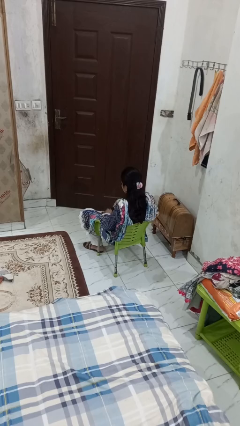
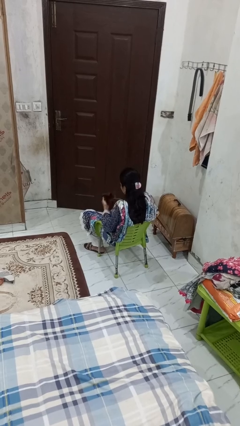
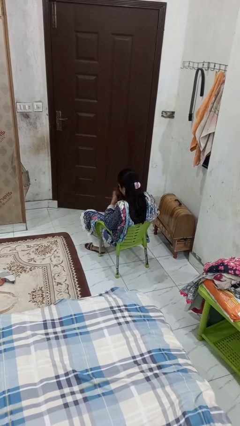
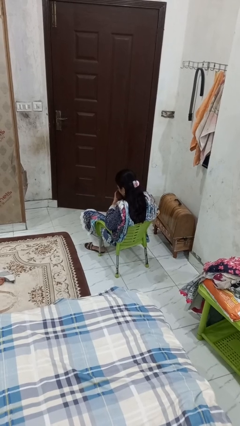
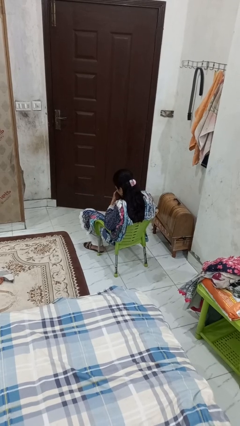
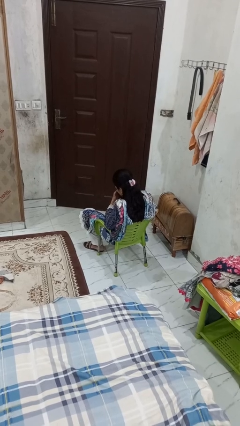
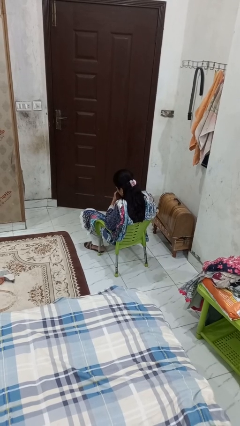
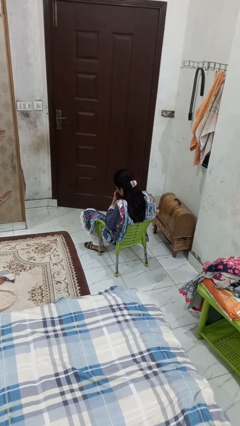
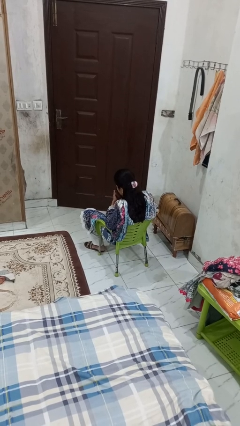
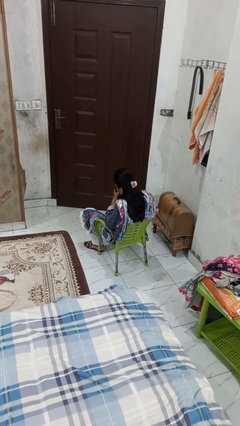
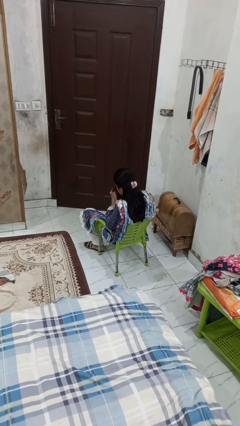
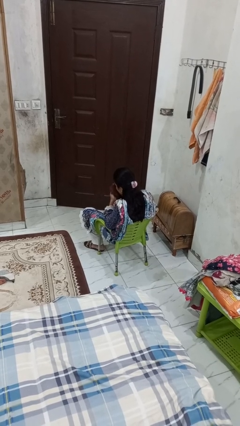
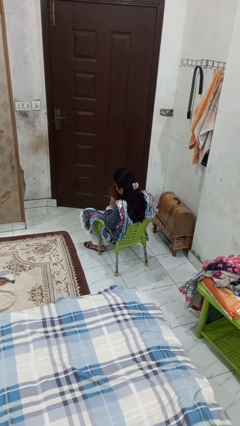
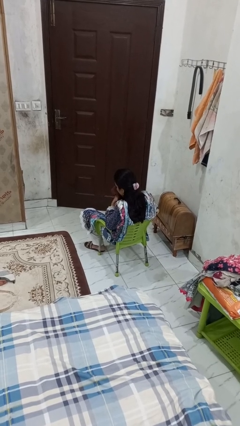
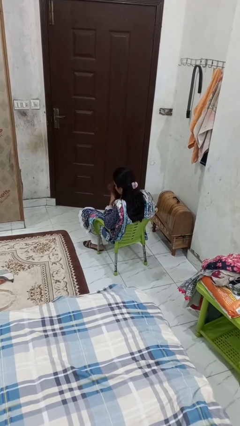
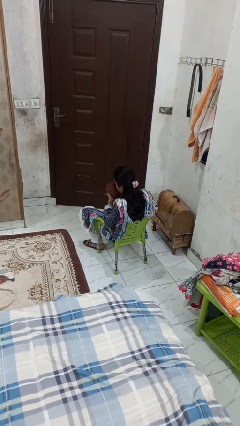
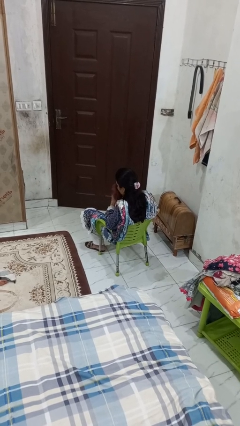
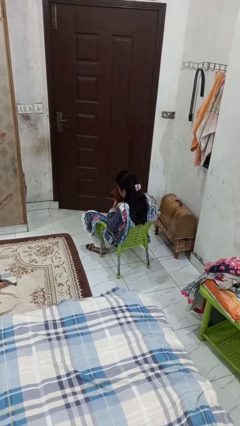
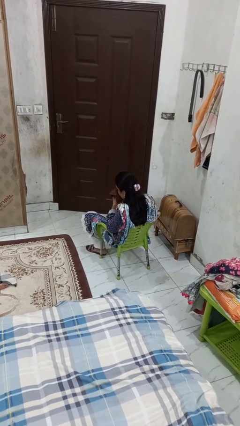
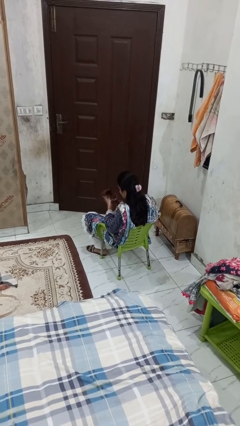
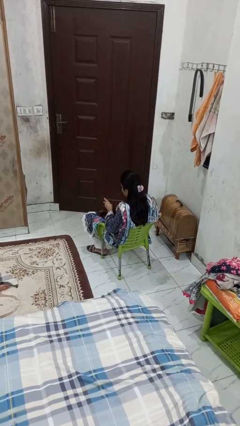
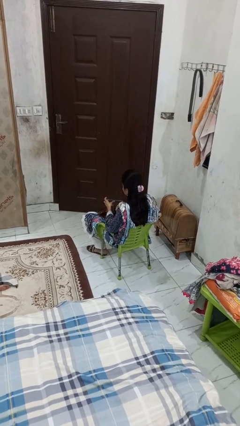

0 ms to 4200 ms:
person blows nose

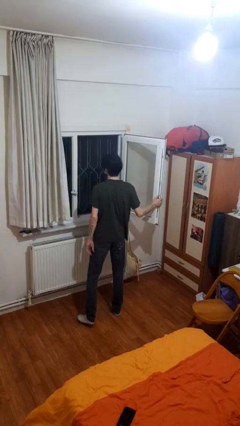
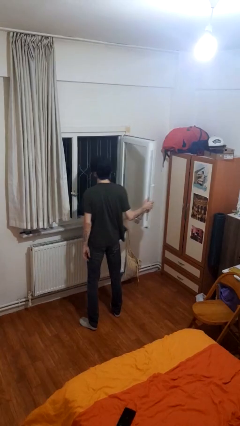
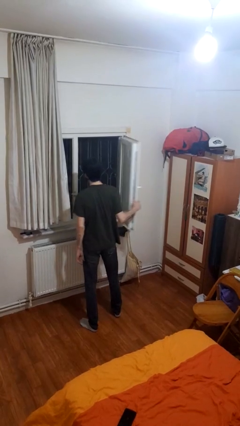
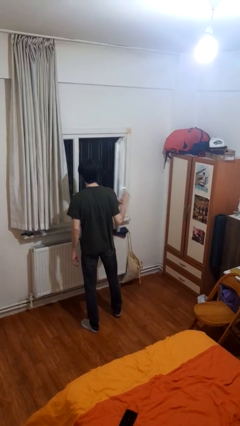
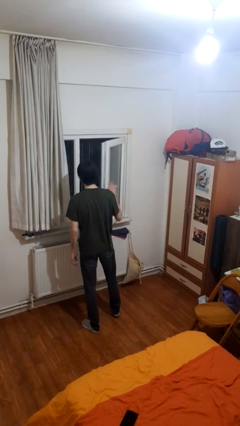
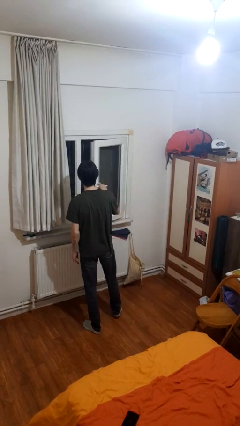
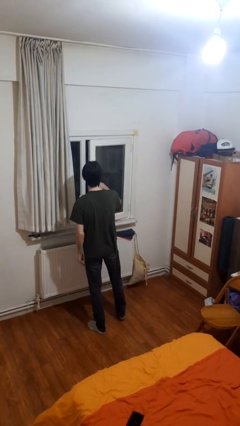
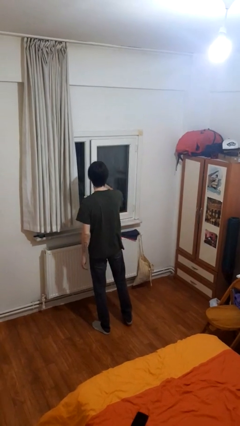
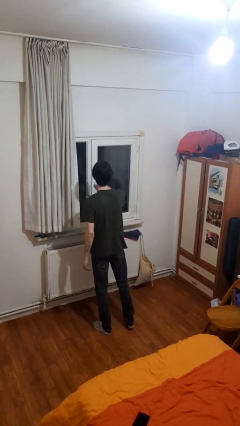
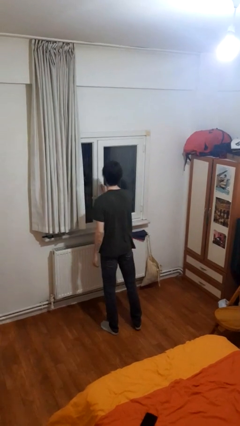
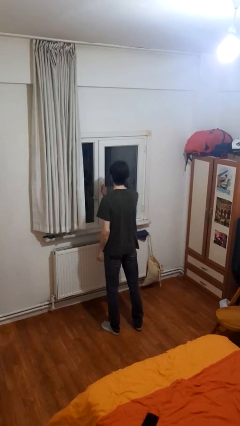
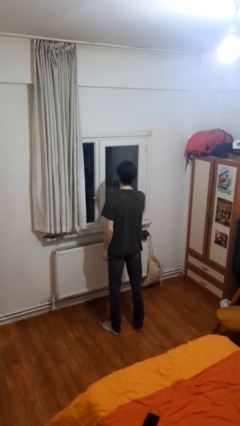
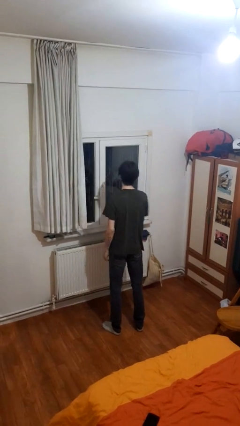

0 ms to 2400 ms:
person closes home window

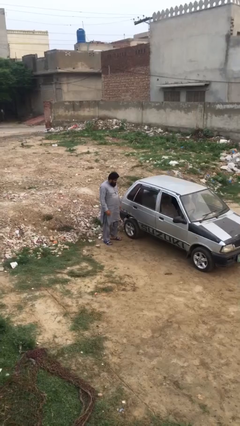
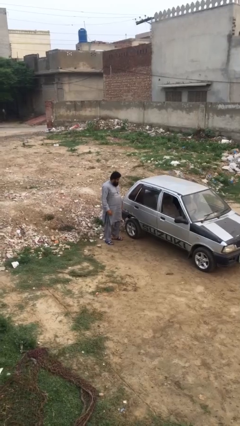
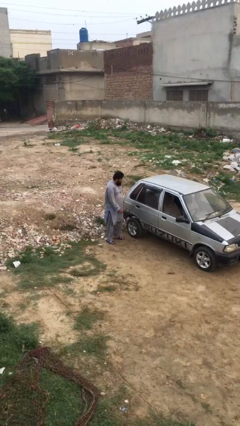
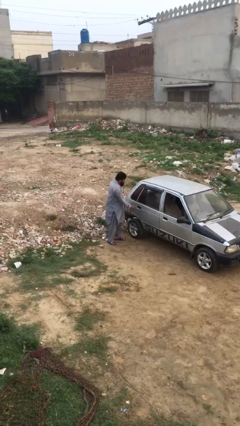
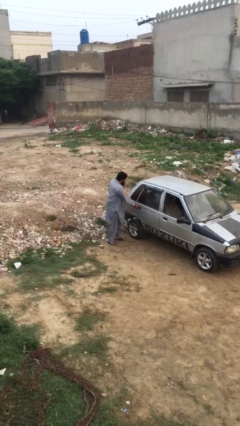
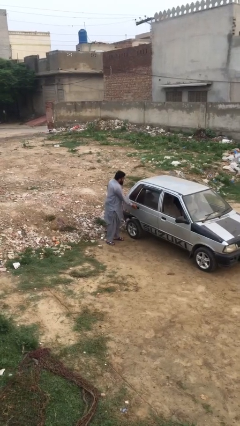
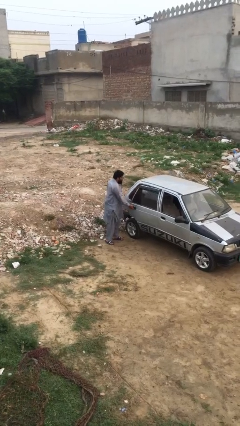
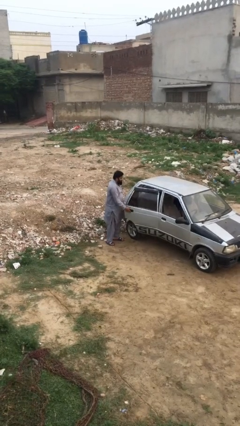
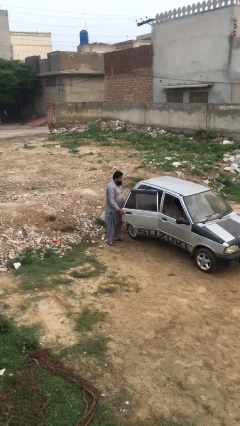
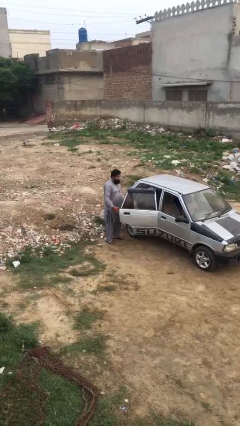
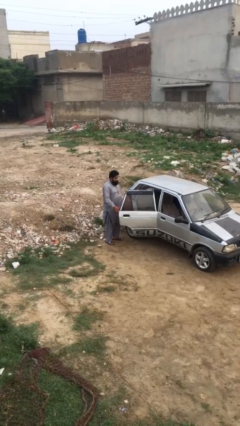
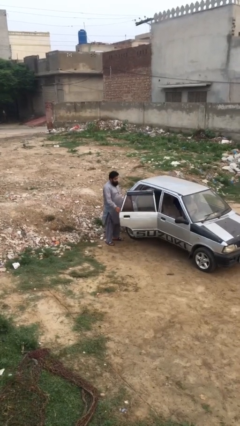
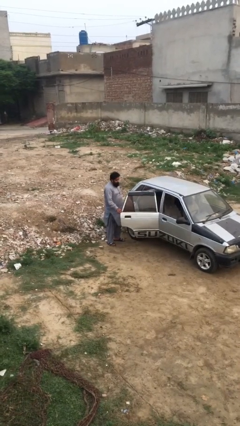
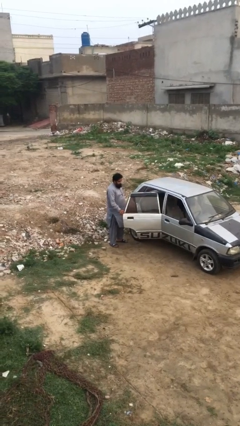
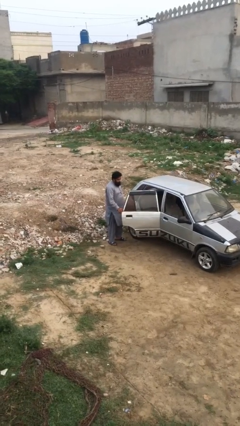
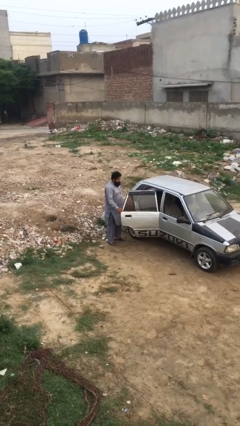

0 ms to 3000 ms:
person opens car door

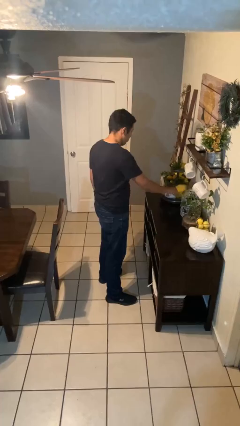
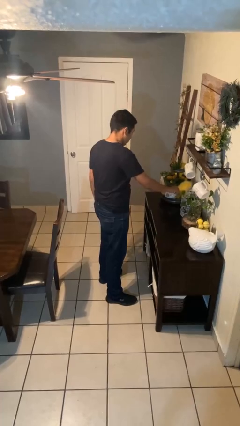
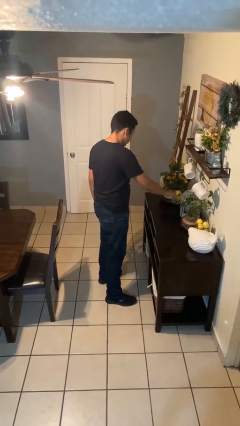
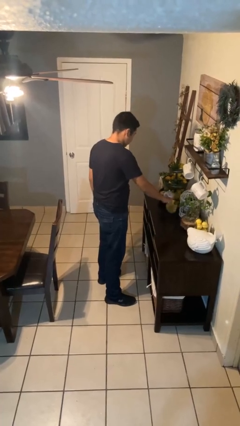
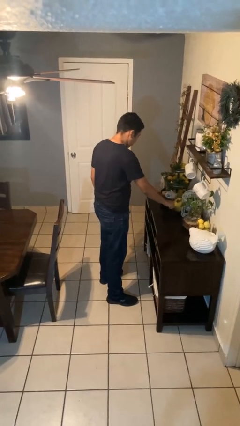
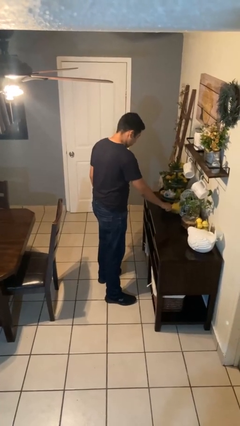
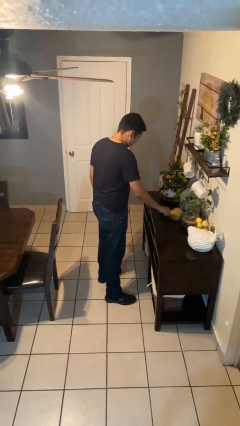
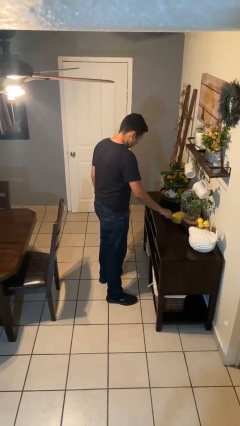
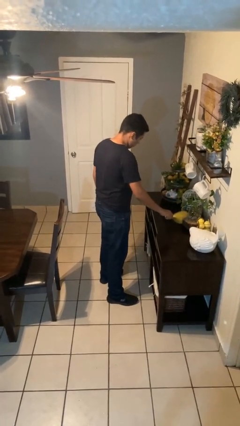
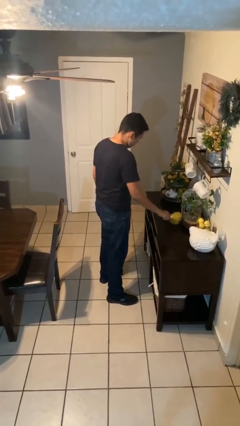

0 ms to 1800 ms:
person dusts furniture

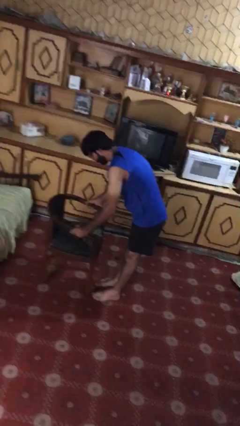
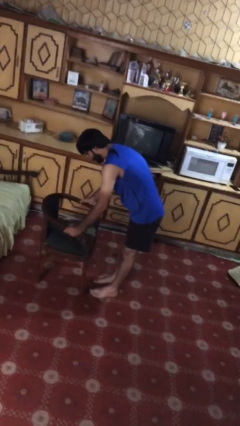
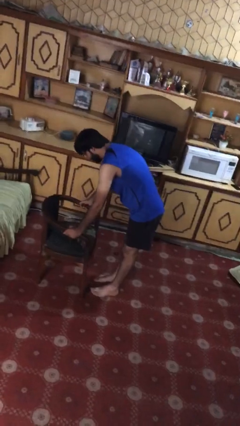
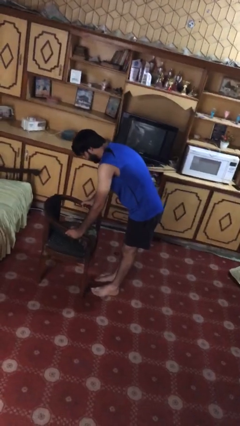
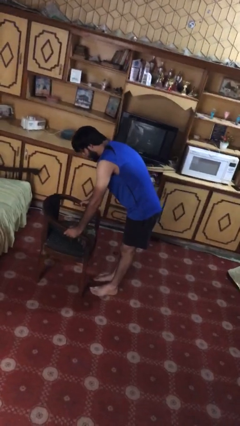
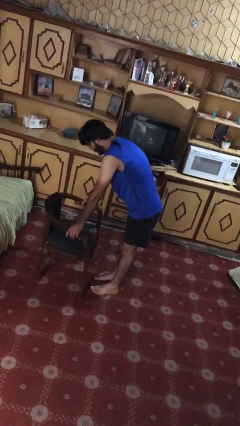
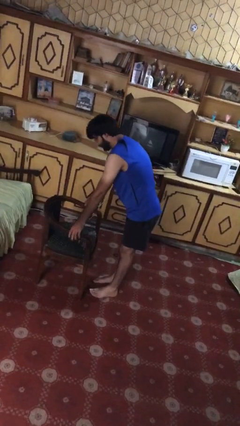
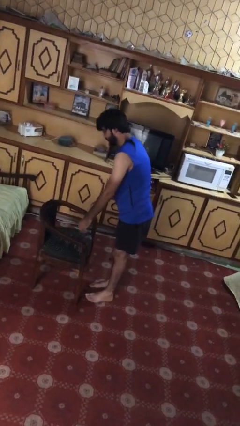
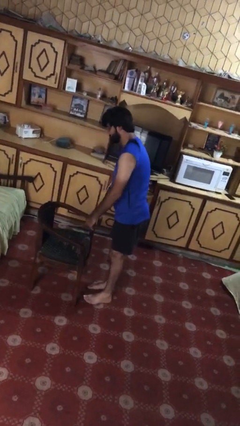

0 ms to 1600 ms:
person puts down object on floor

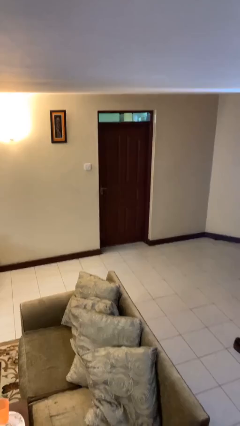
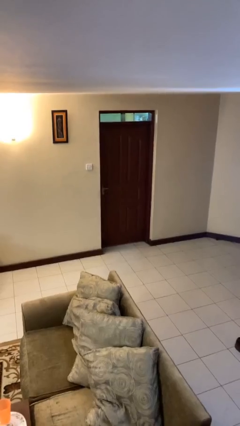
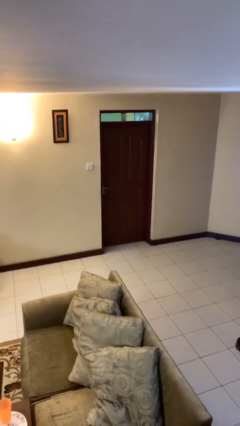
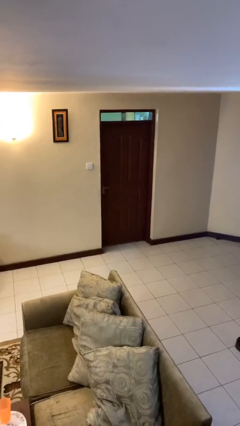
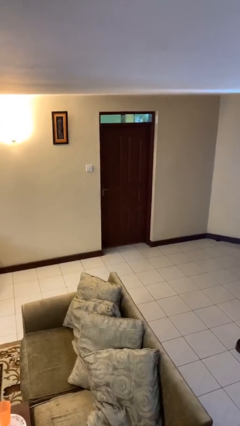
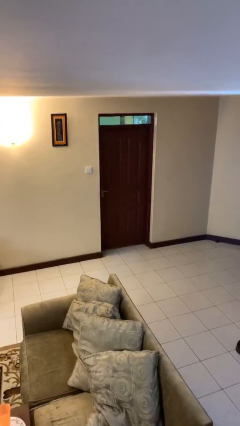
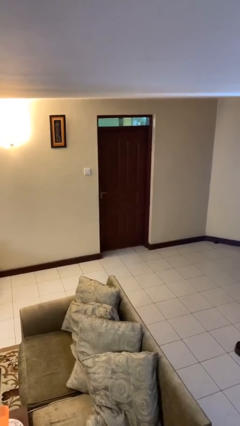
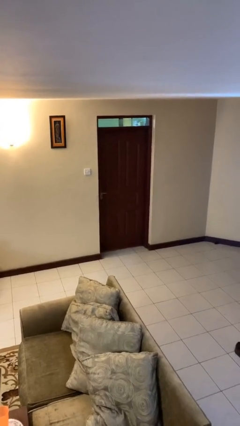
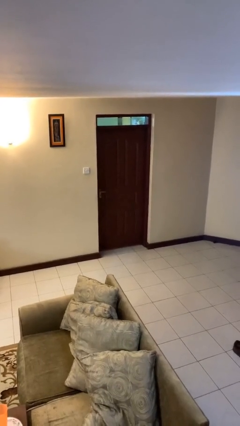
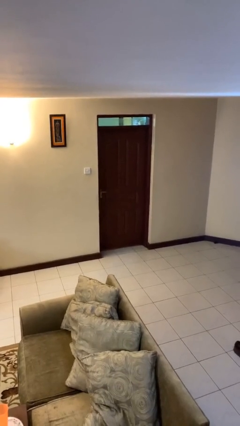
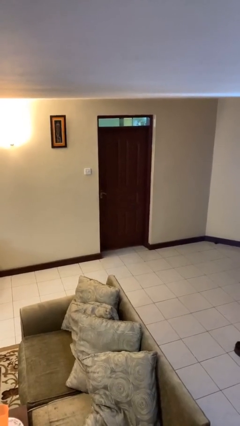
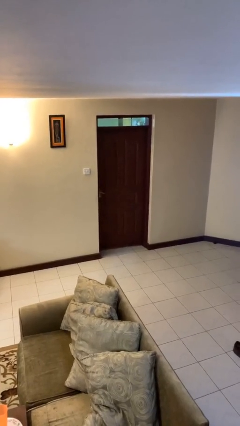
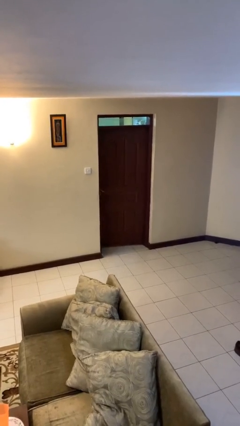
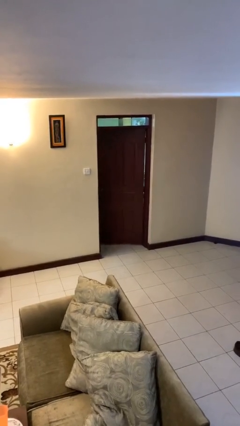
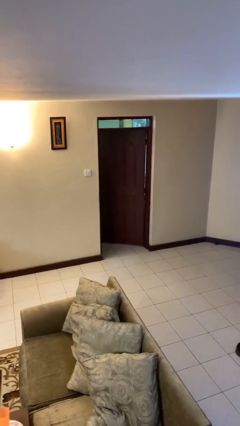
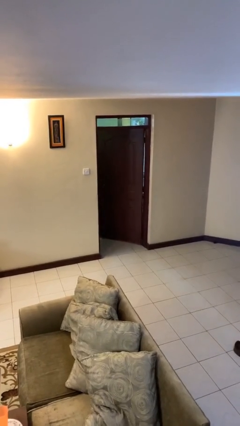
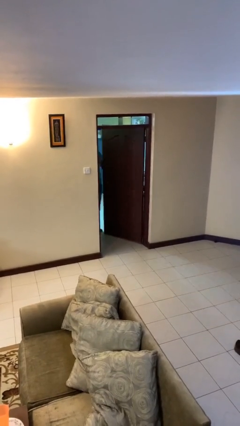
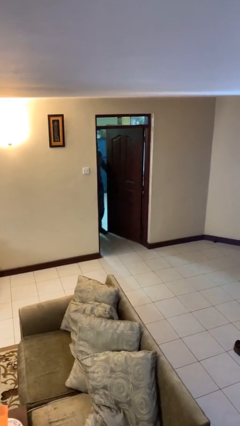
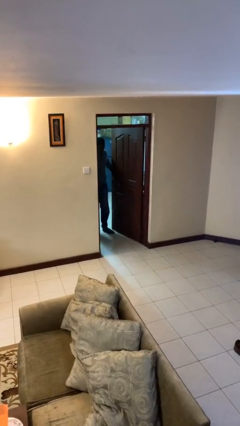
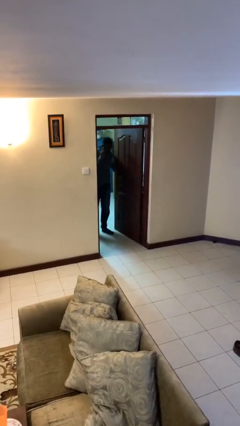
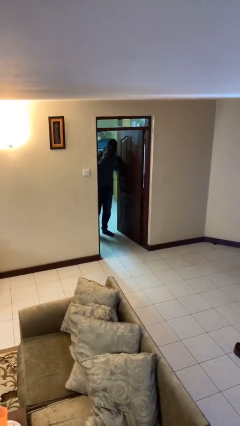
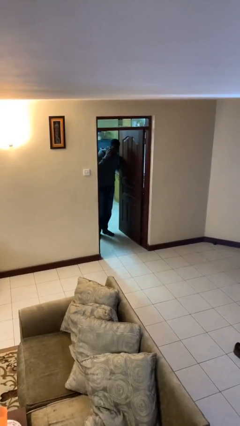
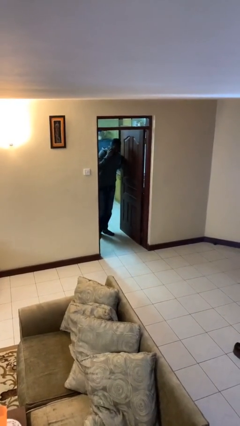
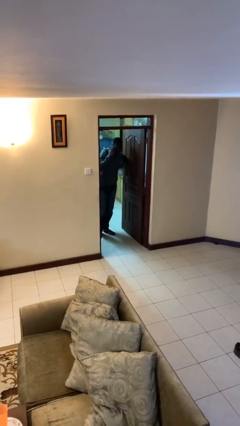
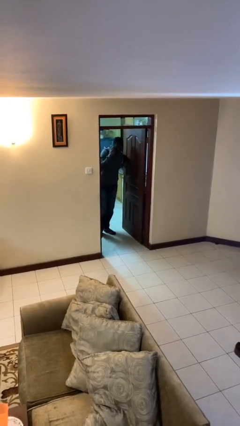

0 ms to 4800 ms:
person opens facility door
